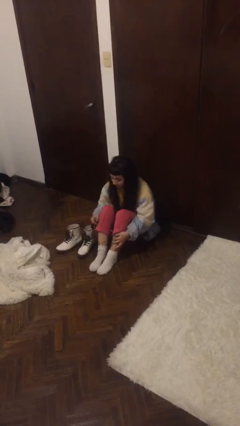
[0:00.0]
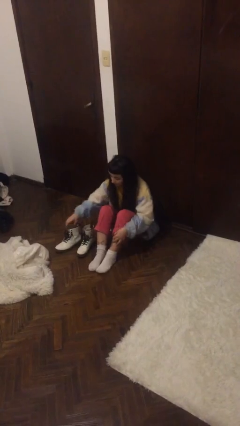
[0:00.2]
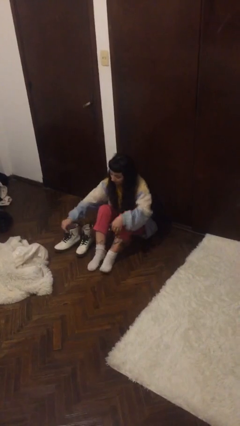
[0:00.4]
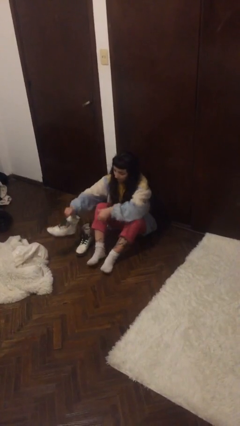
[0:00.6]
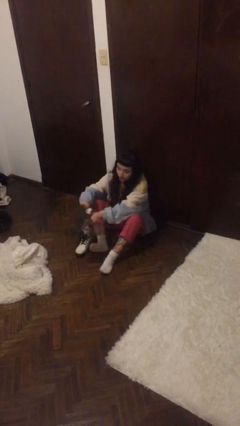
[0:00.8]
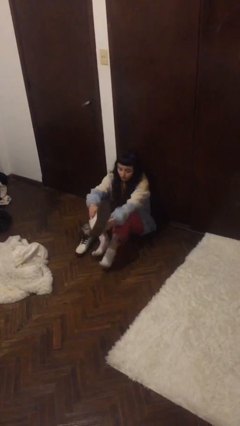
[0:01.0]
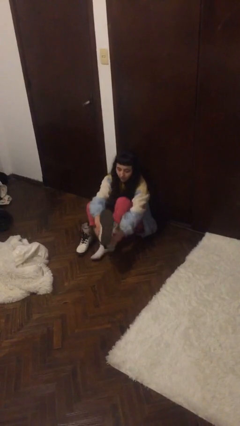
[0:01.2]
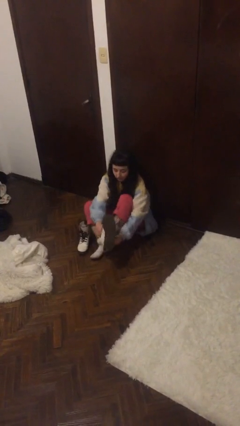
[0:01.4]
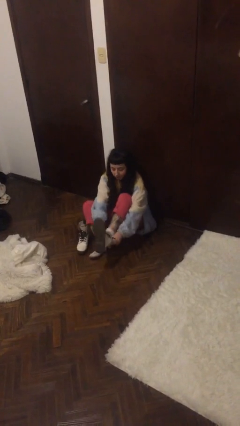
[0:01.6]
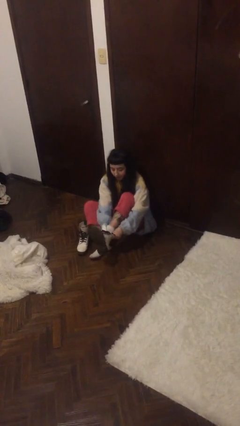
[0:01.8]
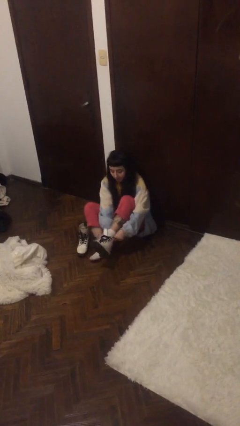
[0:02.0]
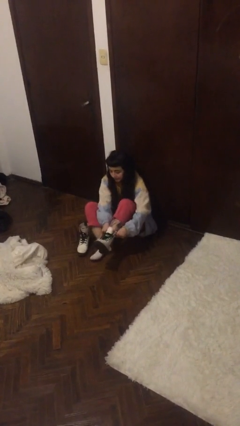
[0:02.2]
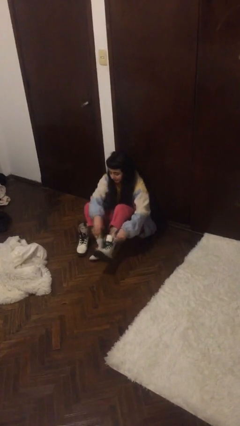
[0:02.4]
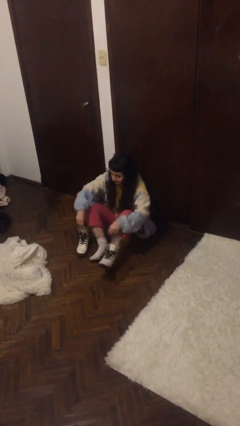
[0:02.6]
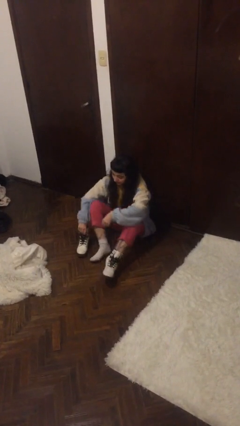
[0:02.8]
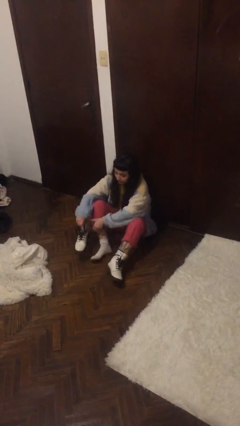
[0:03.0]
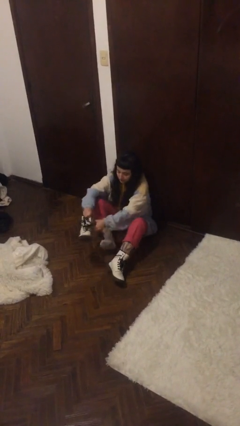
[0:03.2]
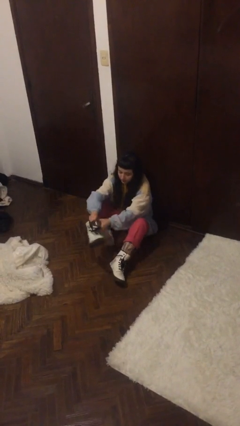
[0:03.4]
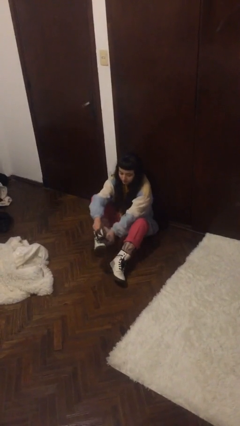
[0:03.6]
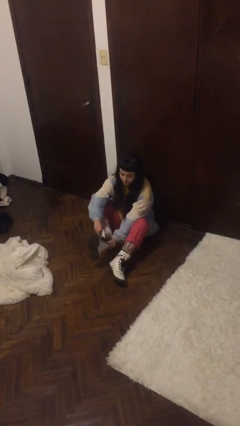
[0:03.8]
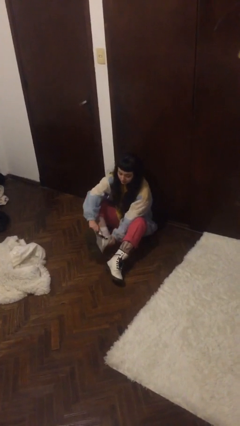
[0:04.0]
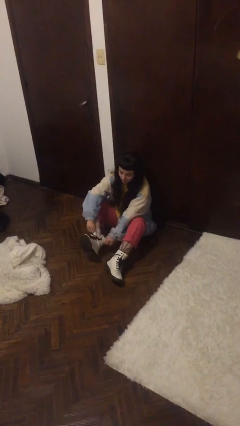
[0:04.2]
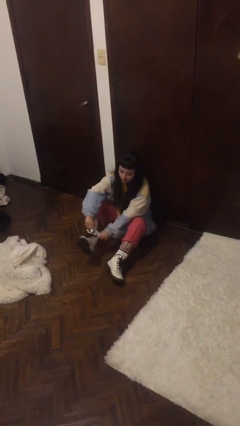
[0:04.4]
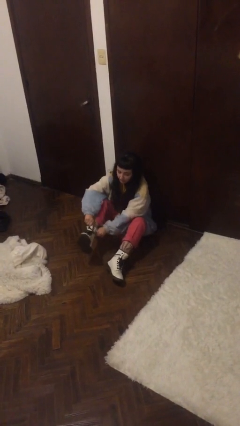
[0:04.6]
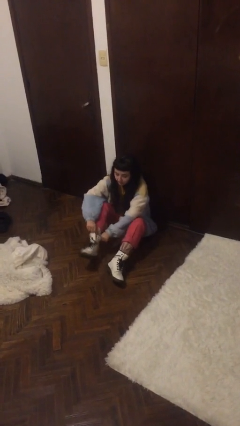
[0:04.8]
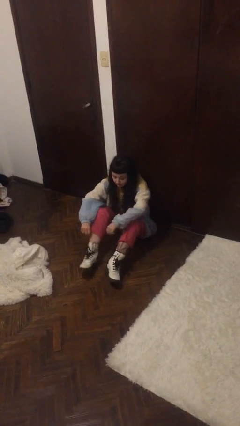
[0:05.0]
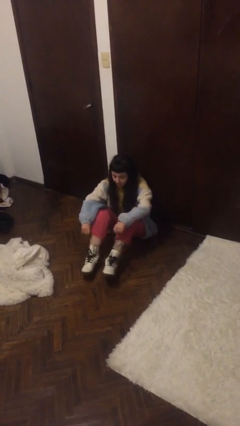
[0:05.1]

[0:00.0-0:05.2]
person puts on boots

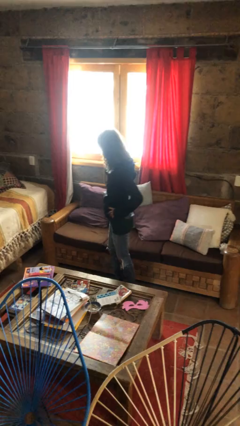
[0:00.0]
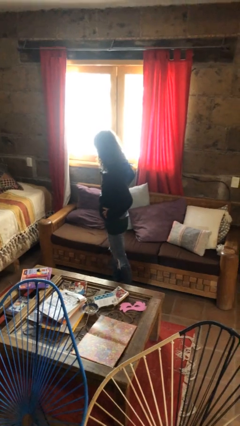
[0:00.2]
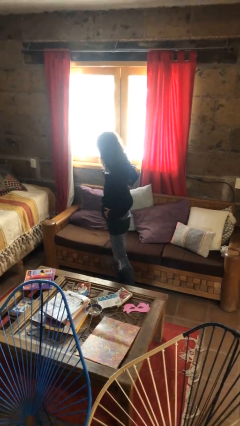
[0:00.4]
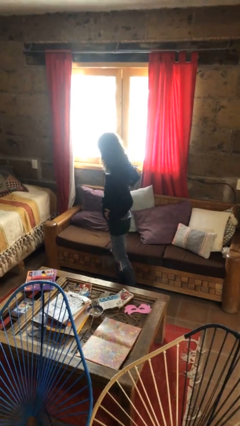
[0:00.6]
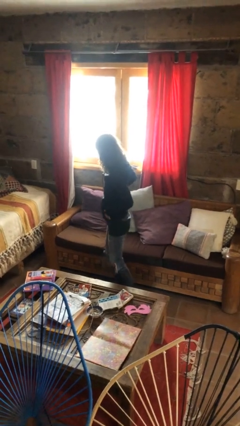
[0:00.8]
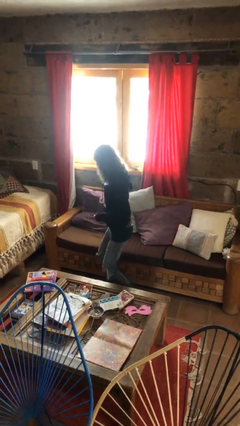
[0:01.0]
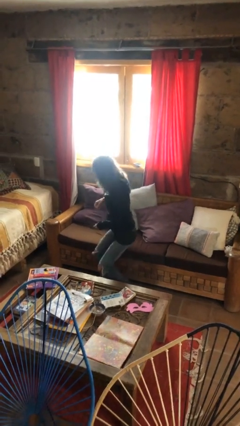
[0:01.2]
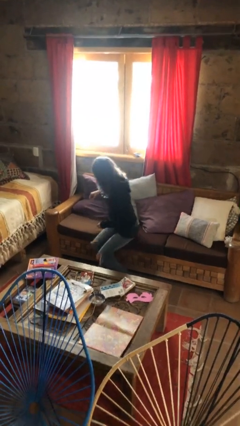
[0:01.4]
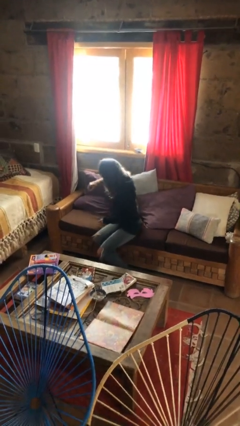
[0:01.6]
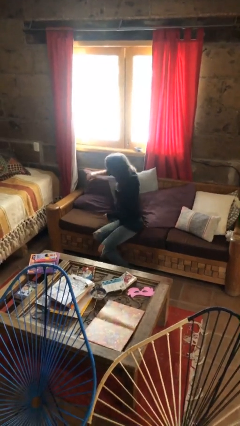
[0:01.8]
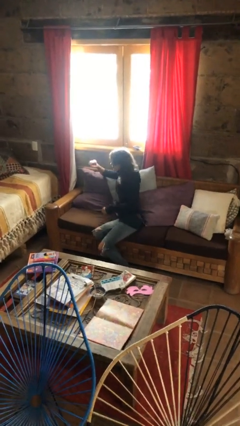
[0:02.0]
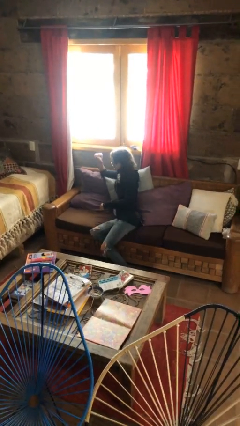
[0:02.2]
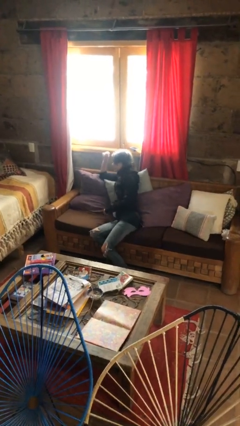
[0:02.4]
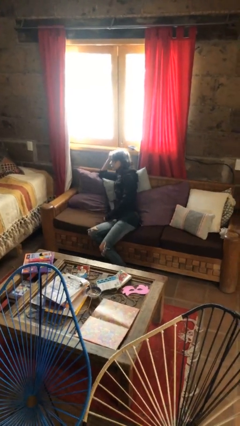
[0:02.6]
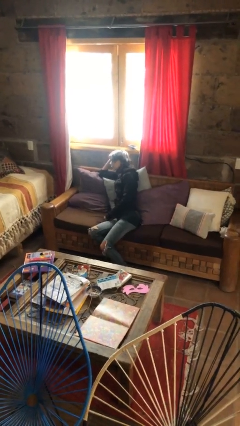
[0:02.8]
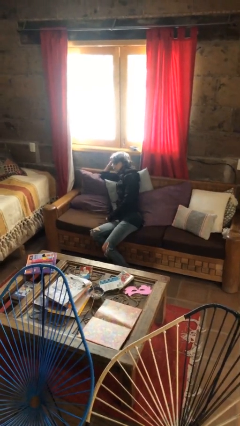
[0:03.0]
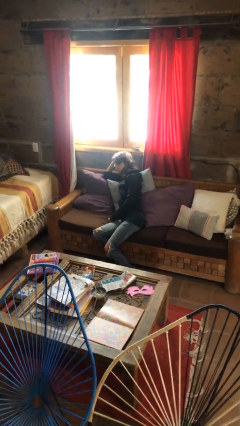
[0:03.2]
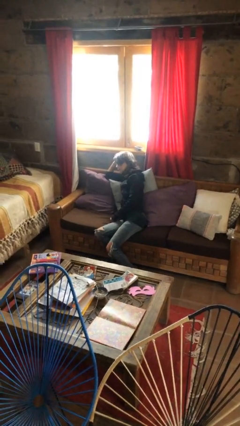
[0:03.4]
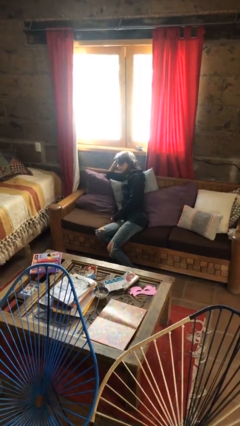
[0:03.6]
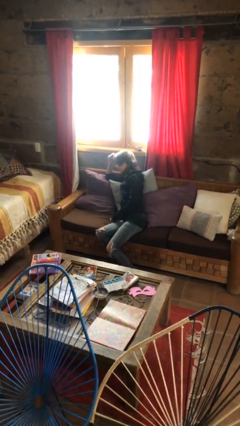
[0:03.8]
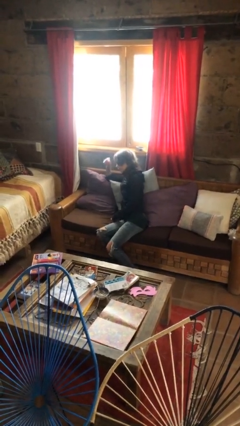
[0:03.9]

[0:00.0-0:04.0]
person lies down on couch

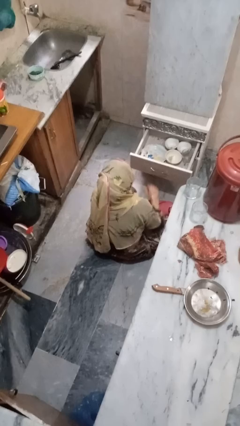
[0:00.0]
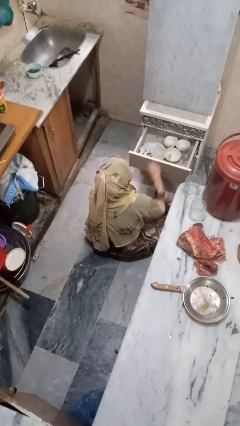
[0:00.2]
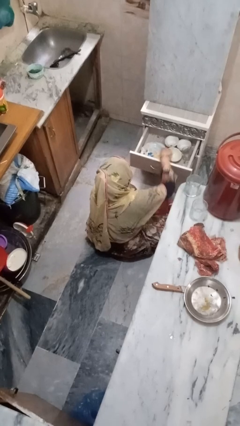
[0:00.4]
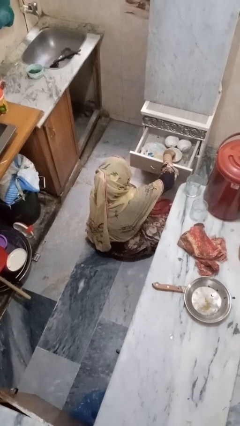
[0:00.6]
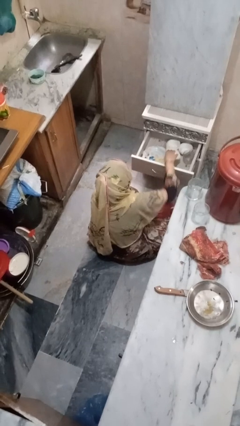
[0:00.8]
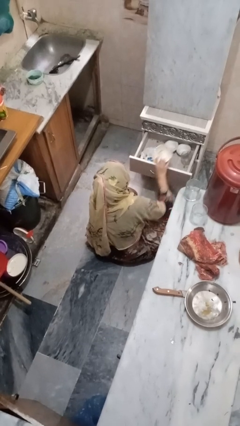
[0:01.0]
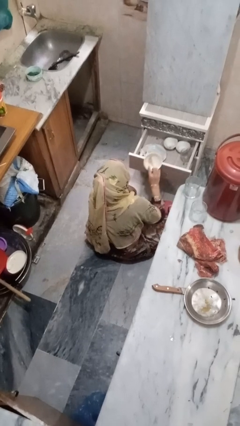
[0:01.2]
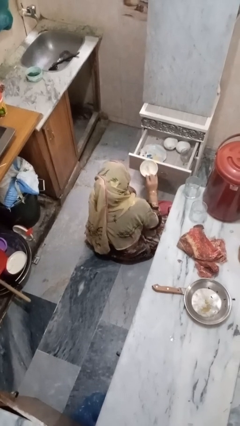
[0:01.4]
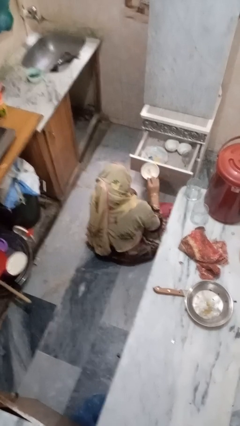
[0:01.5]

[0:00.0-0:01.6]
person takes object from kitchen drawer

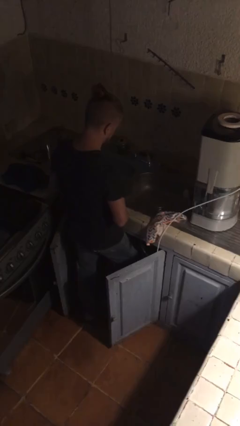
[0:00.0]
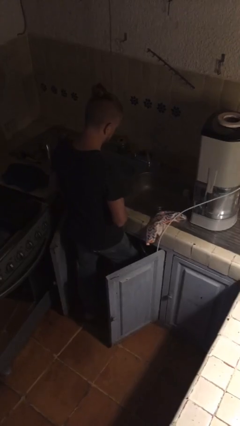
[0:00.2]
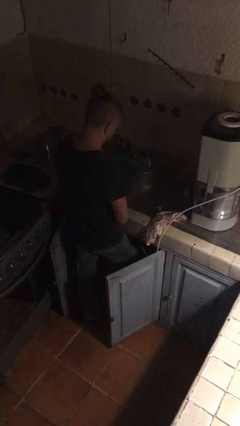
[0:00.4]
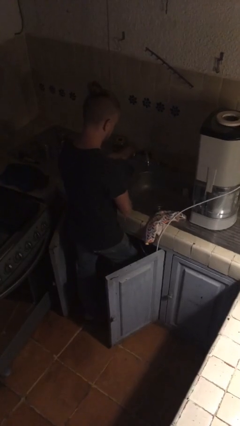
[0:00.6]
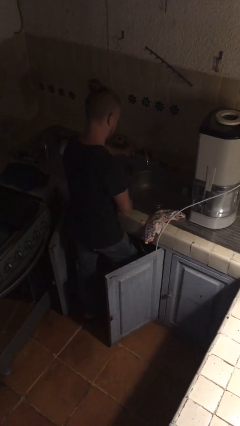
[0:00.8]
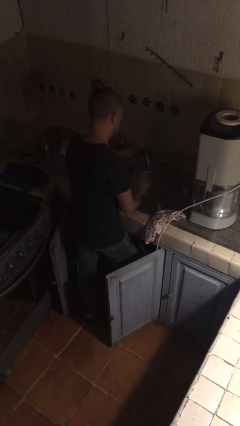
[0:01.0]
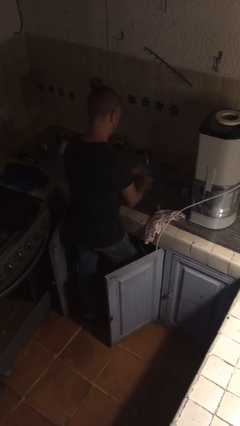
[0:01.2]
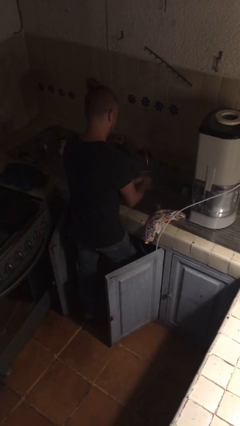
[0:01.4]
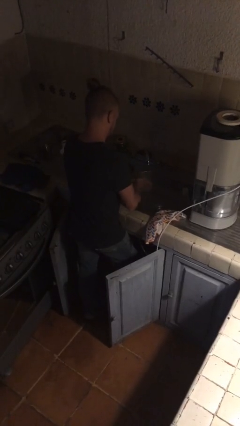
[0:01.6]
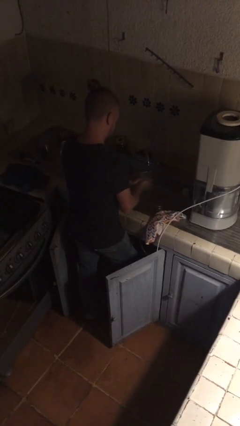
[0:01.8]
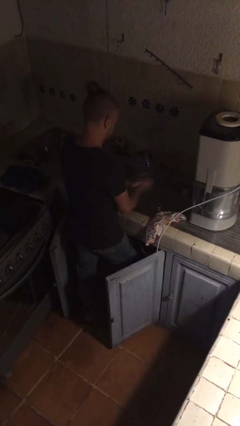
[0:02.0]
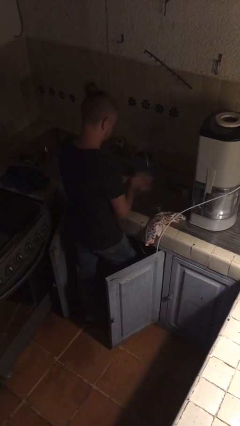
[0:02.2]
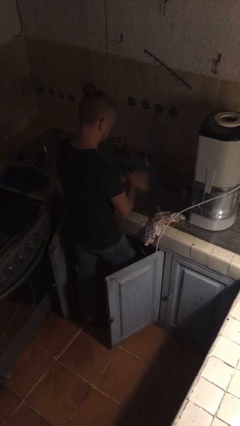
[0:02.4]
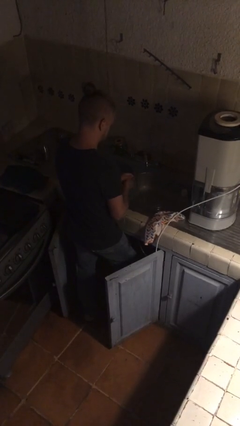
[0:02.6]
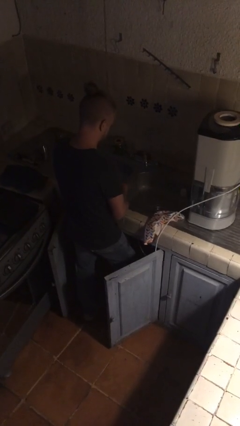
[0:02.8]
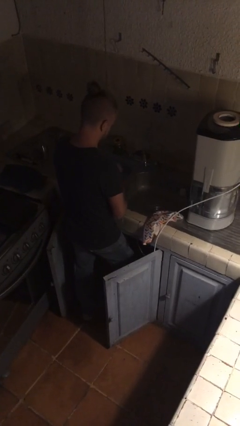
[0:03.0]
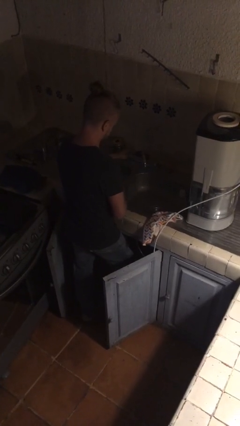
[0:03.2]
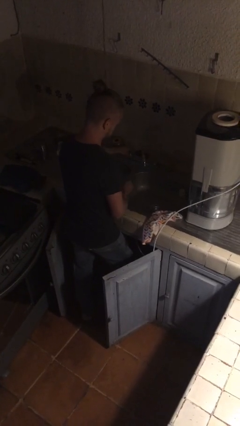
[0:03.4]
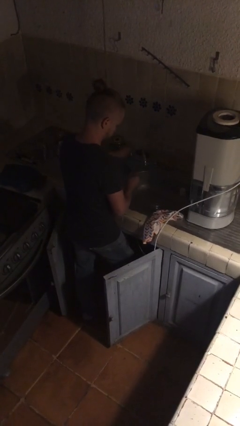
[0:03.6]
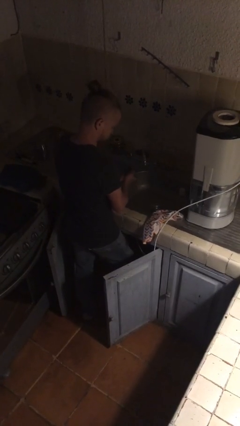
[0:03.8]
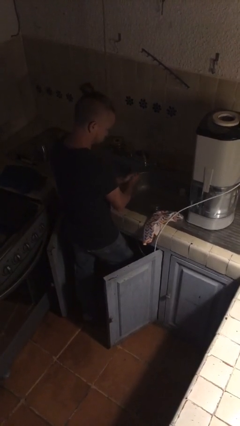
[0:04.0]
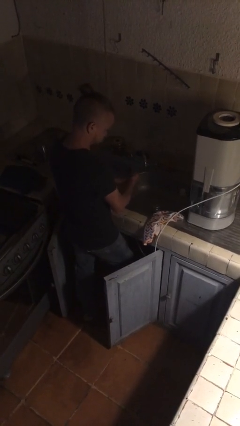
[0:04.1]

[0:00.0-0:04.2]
person washes hands

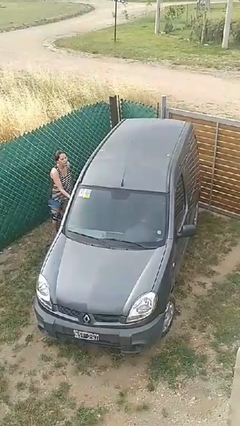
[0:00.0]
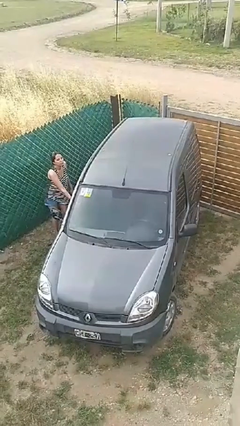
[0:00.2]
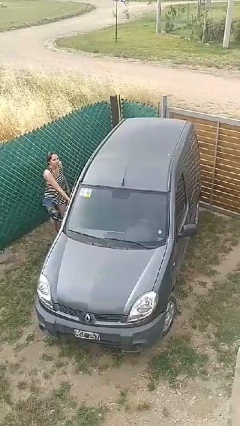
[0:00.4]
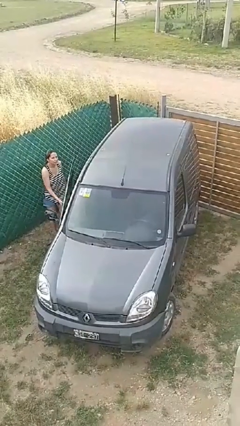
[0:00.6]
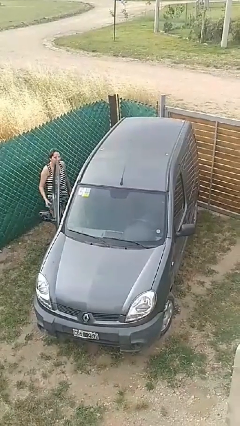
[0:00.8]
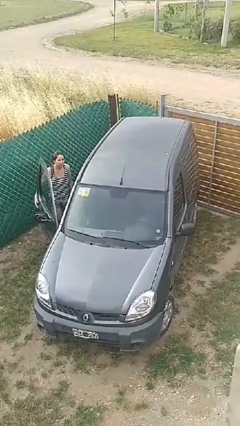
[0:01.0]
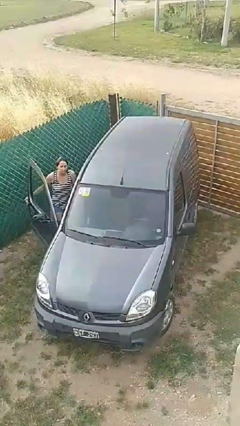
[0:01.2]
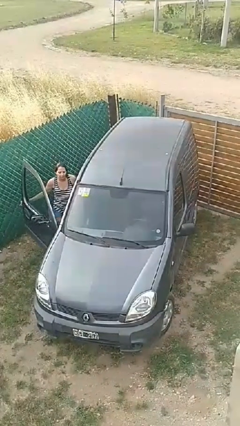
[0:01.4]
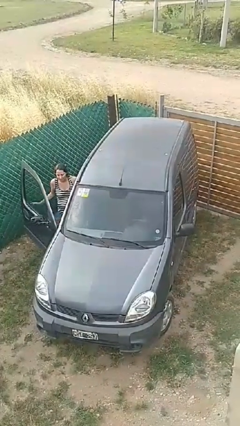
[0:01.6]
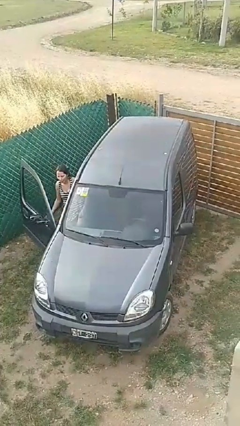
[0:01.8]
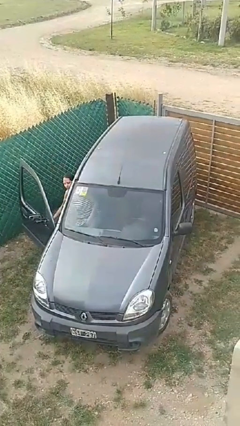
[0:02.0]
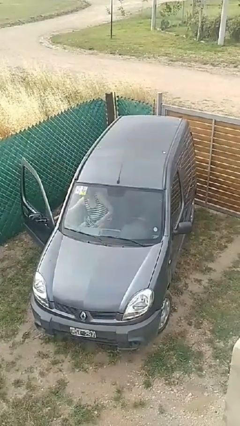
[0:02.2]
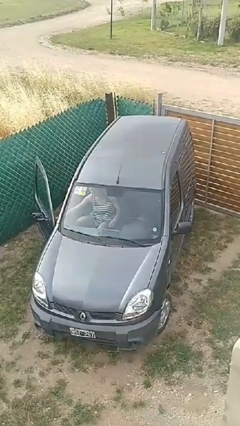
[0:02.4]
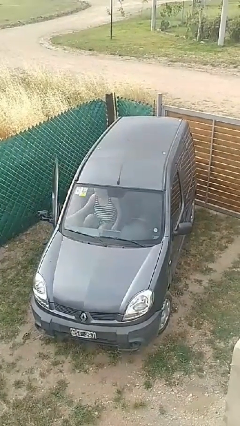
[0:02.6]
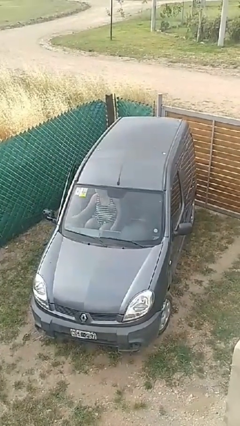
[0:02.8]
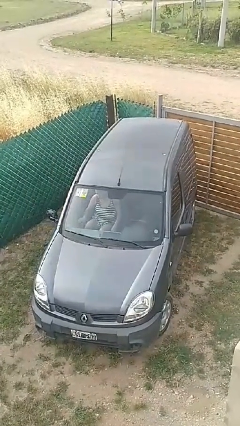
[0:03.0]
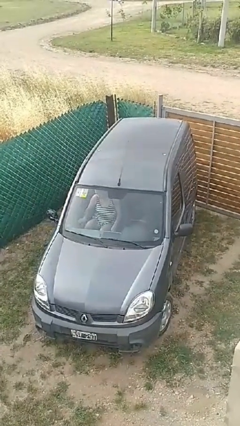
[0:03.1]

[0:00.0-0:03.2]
car picks up person
